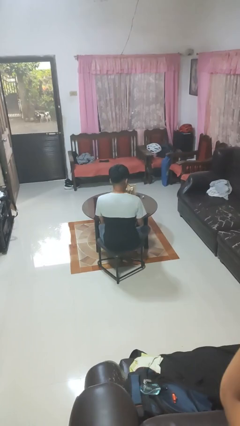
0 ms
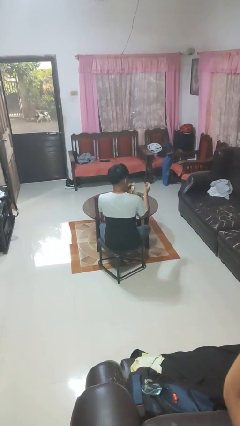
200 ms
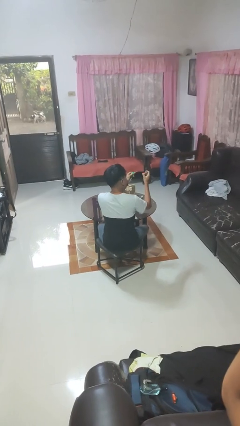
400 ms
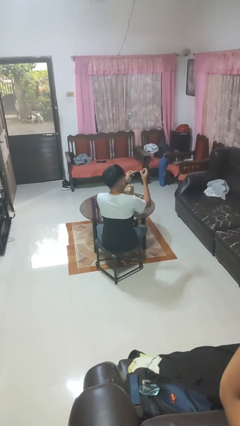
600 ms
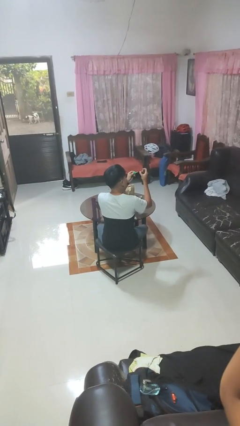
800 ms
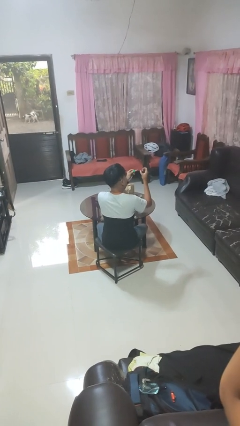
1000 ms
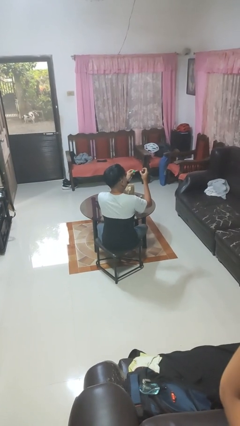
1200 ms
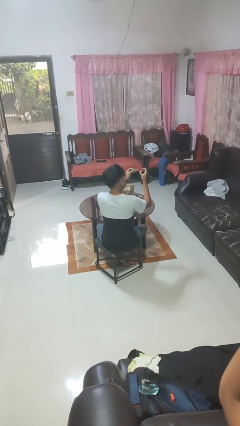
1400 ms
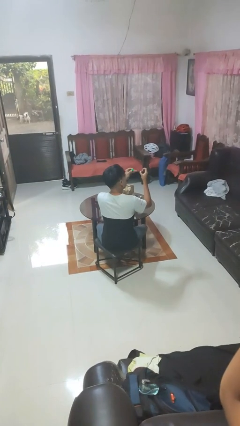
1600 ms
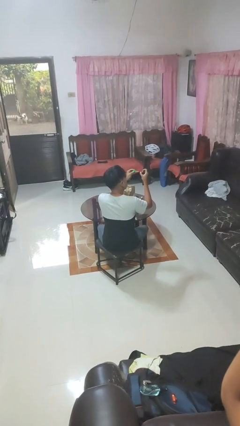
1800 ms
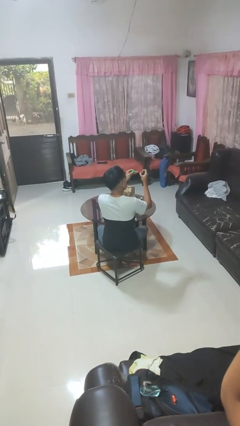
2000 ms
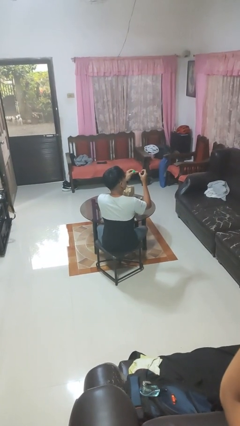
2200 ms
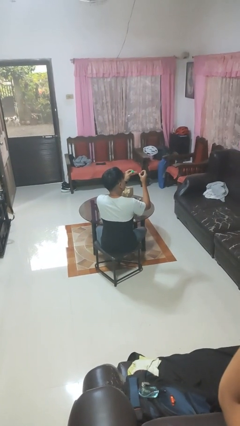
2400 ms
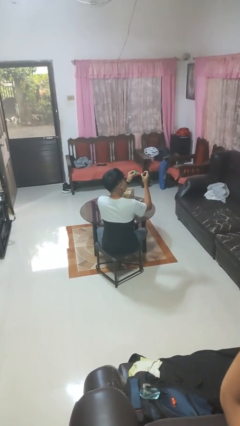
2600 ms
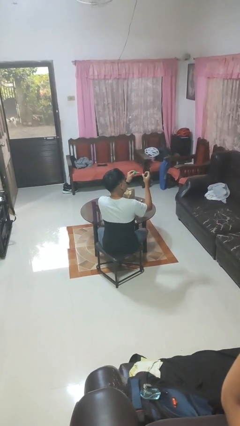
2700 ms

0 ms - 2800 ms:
person paints fingernails

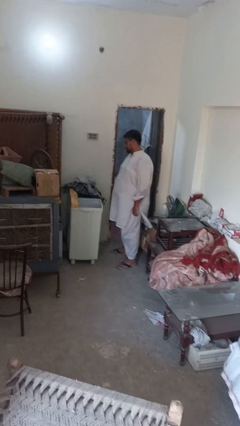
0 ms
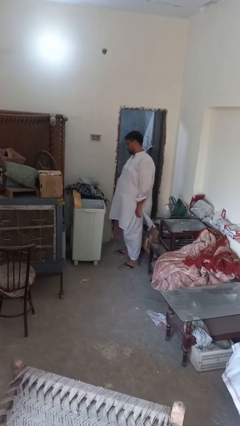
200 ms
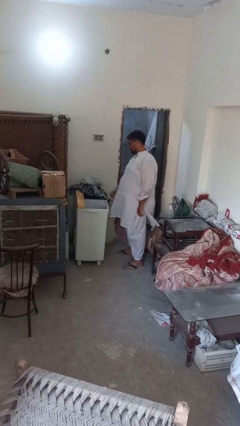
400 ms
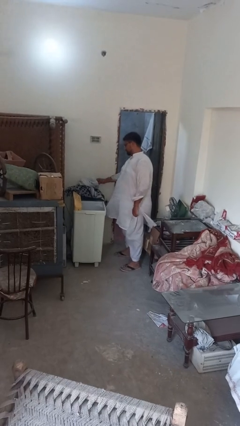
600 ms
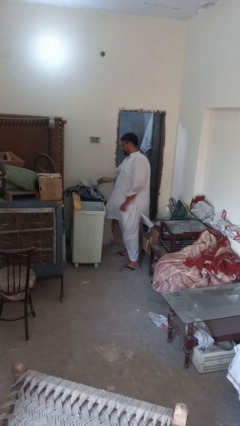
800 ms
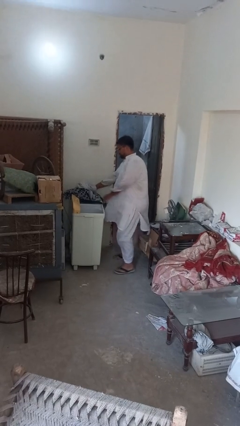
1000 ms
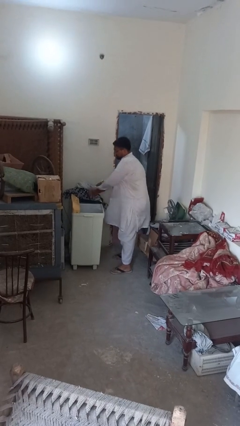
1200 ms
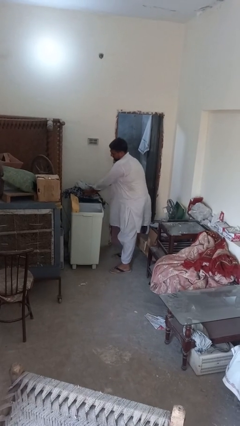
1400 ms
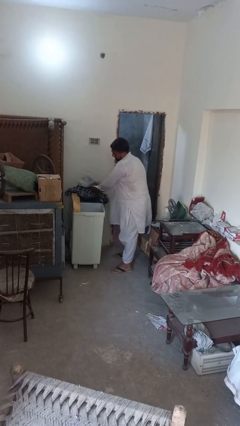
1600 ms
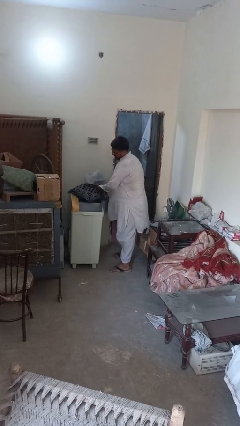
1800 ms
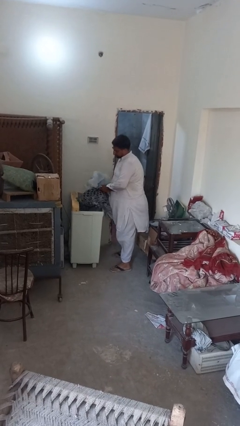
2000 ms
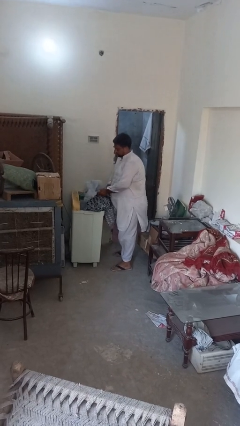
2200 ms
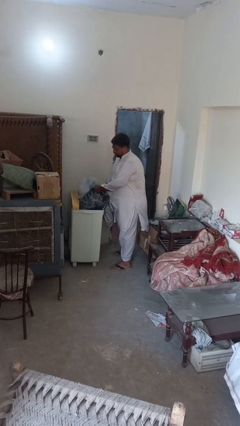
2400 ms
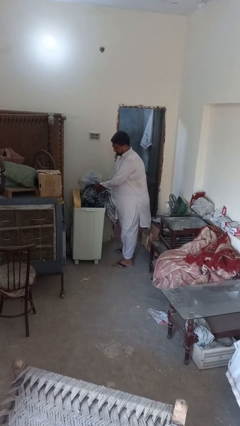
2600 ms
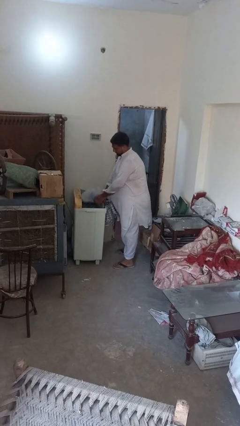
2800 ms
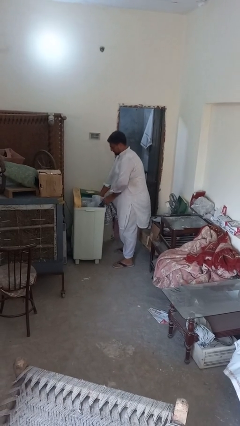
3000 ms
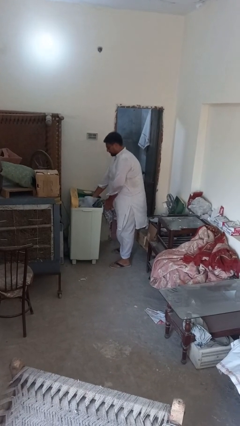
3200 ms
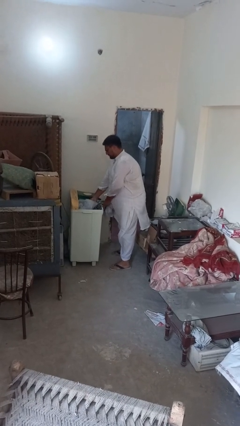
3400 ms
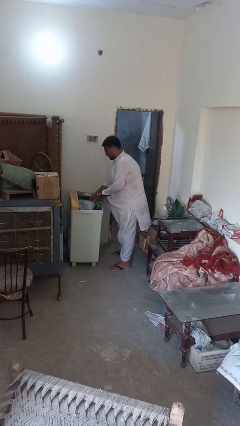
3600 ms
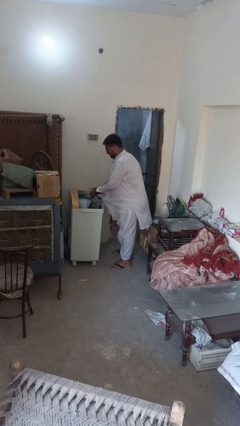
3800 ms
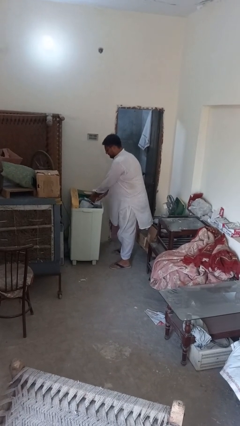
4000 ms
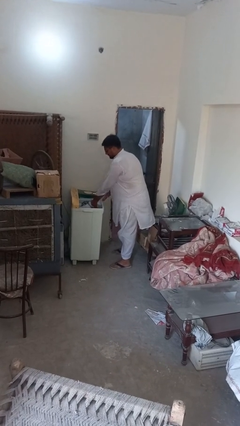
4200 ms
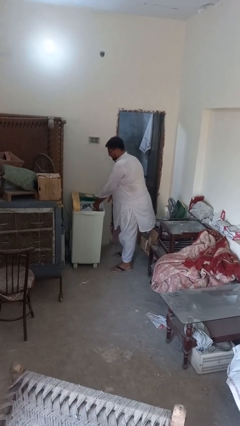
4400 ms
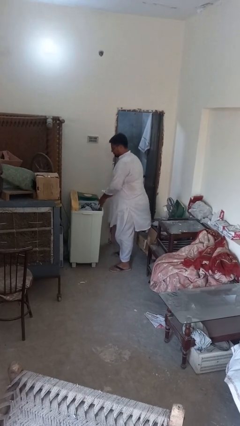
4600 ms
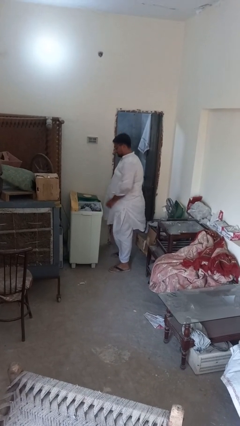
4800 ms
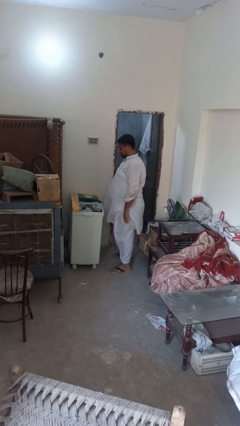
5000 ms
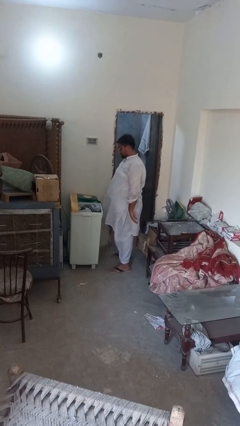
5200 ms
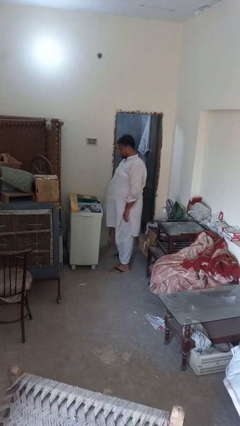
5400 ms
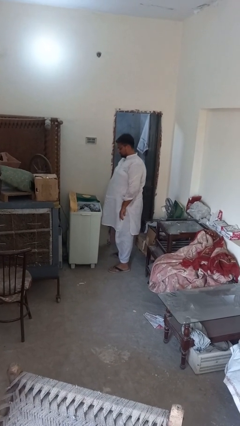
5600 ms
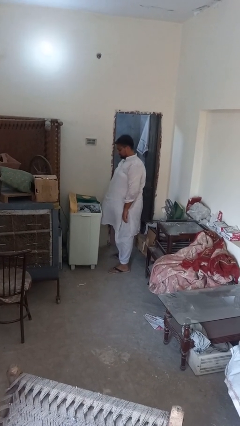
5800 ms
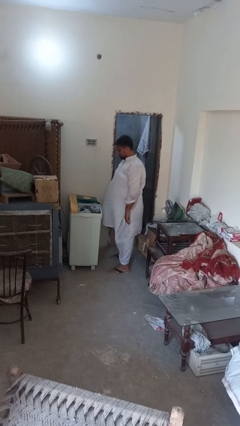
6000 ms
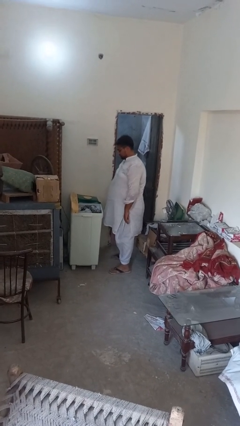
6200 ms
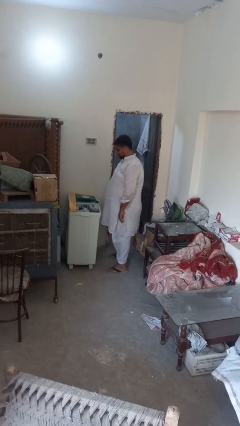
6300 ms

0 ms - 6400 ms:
person loads clotheswasher

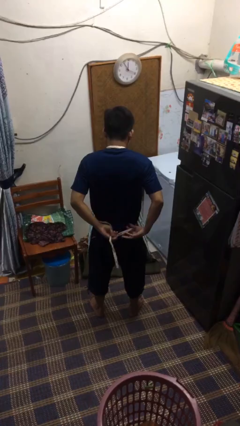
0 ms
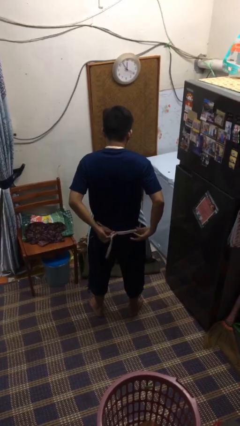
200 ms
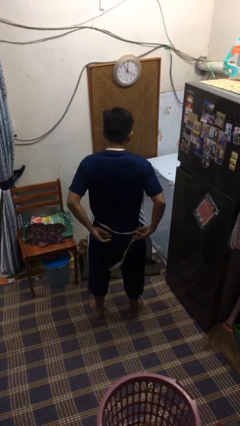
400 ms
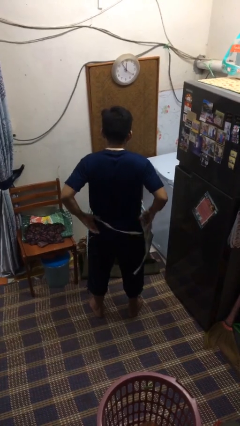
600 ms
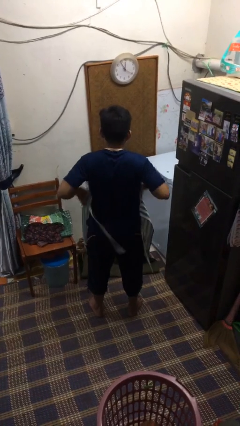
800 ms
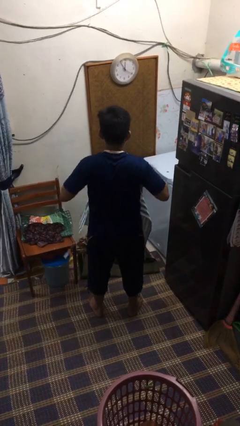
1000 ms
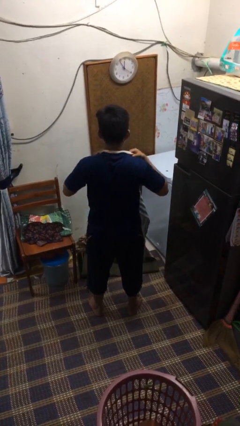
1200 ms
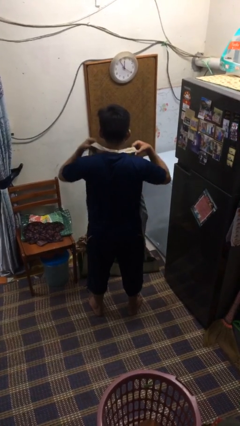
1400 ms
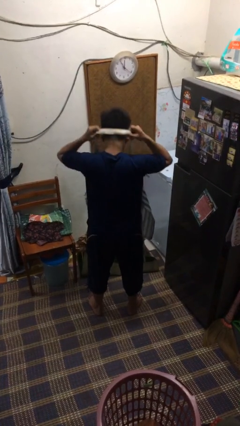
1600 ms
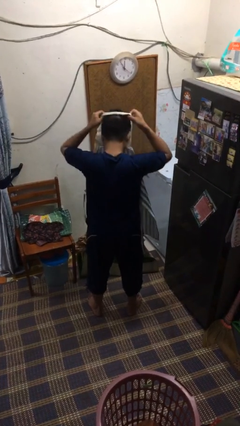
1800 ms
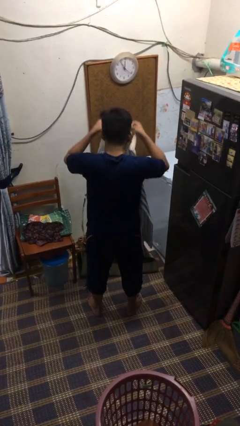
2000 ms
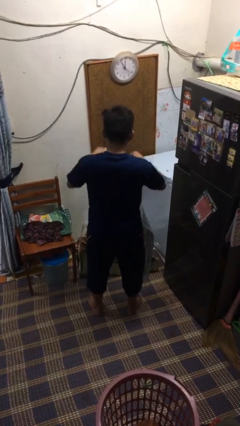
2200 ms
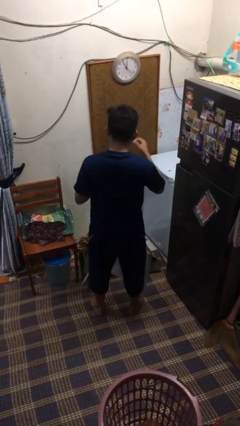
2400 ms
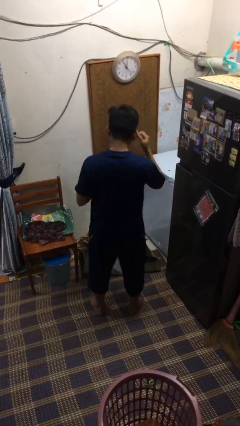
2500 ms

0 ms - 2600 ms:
person takes off apron

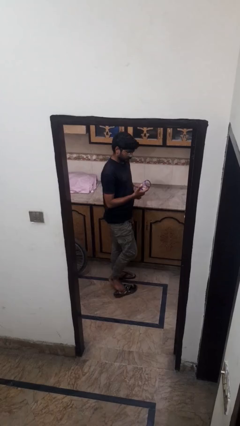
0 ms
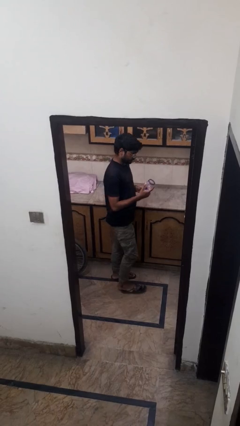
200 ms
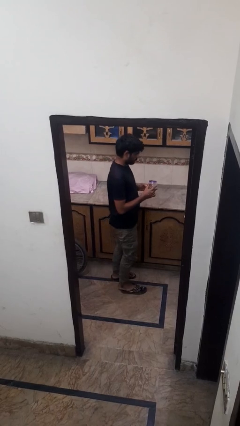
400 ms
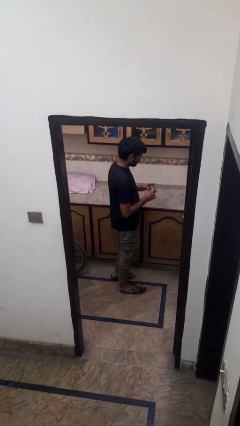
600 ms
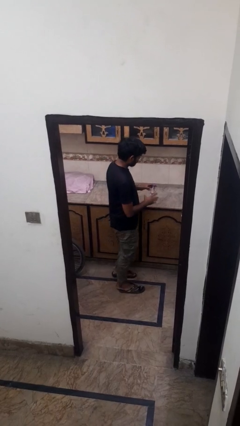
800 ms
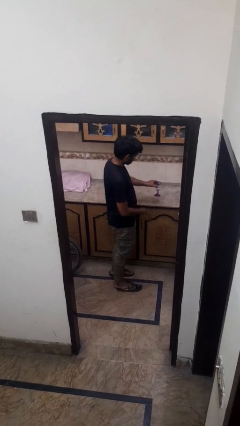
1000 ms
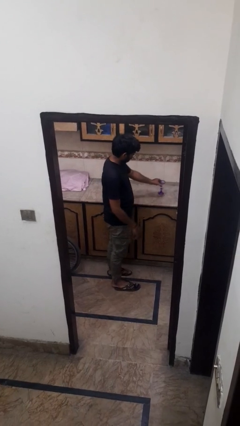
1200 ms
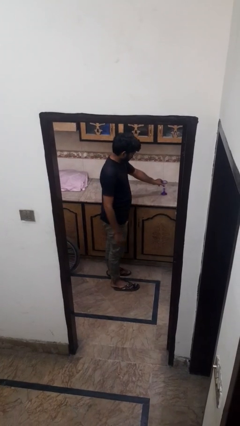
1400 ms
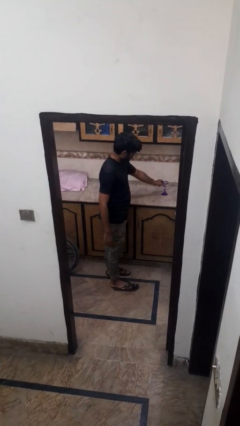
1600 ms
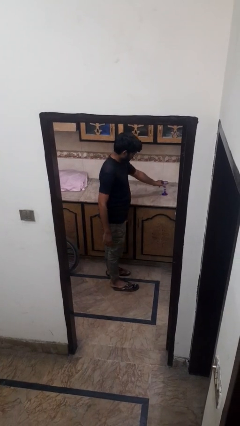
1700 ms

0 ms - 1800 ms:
person puts down object on countertop

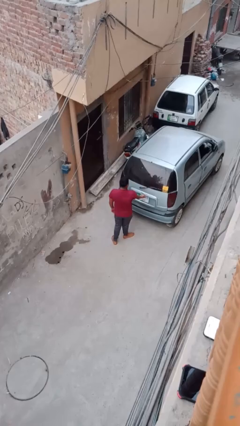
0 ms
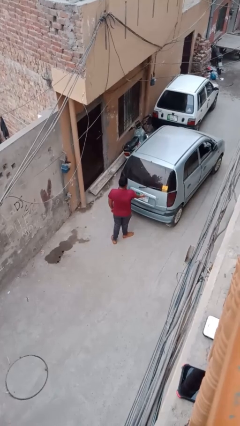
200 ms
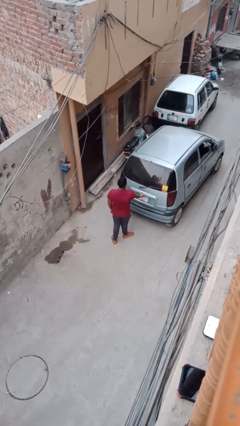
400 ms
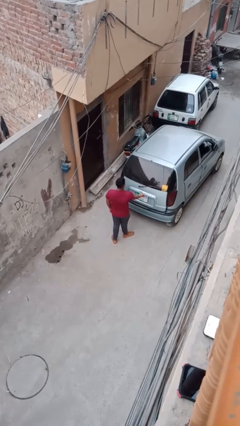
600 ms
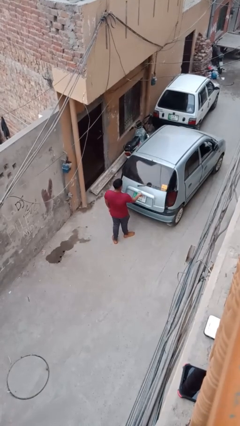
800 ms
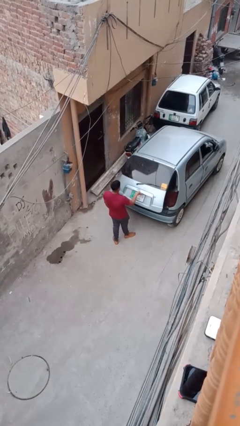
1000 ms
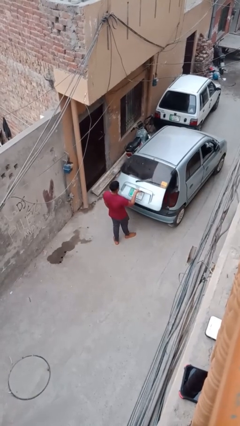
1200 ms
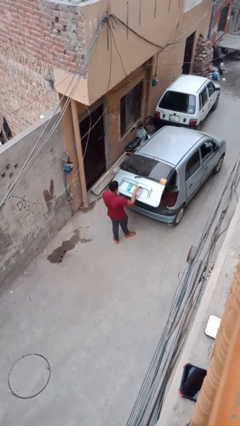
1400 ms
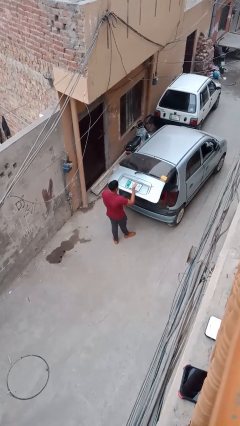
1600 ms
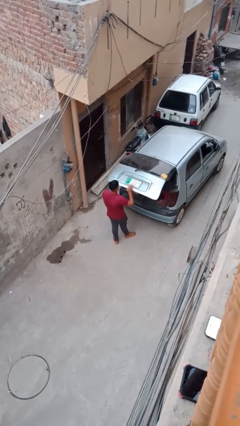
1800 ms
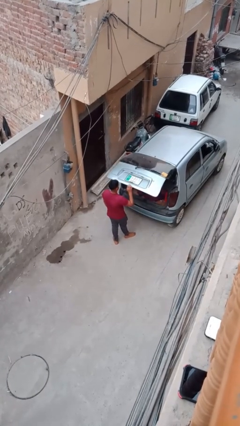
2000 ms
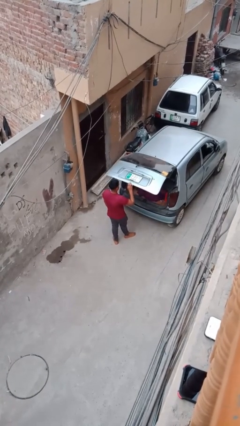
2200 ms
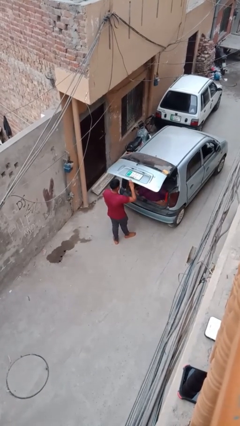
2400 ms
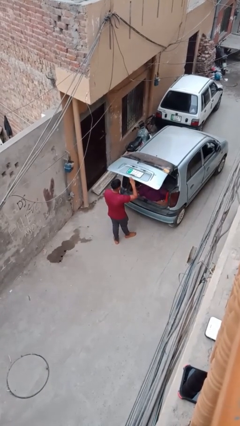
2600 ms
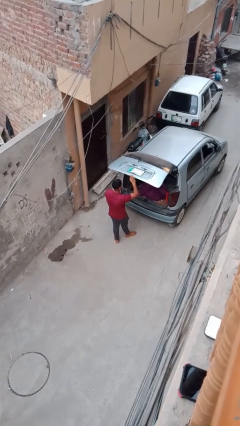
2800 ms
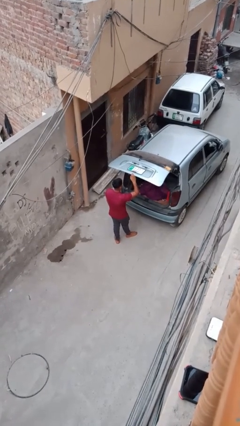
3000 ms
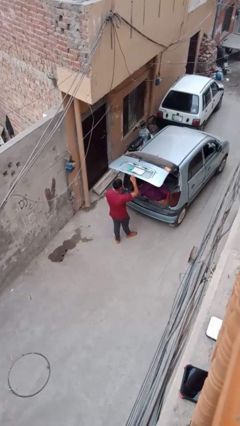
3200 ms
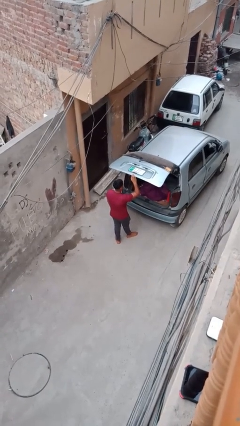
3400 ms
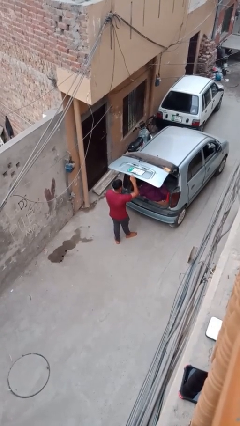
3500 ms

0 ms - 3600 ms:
person opens car trunk

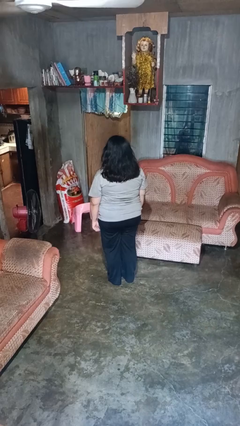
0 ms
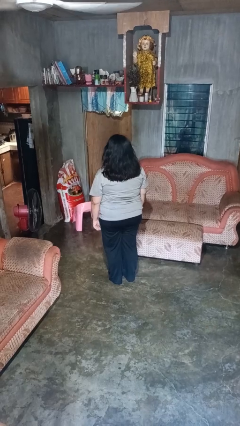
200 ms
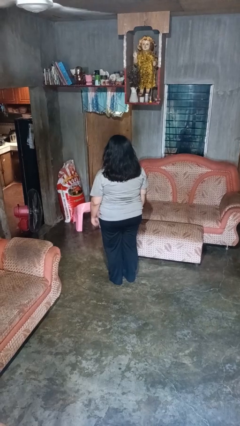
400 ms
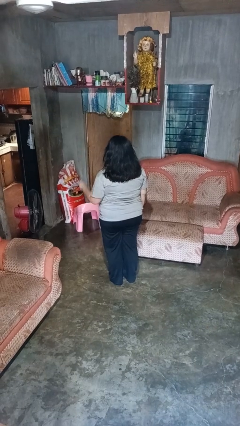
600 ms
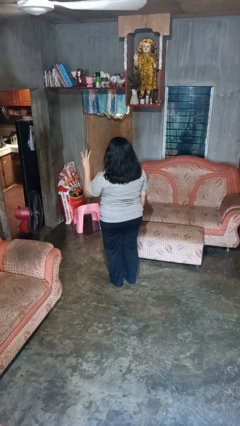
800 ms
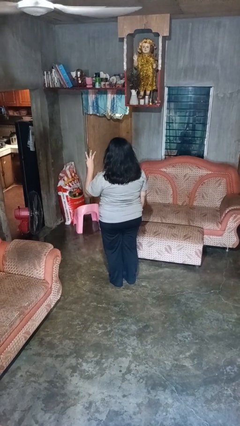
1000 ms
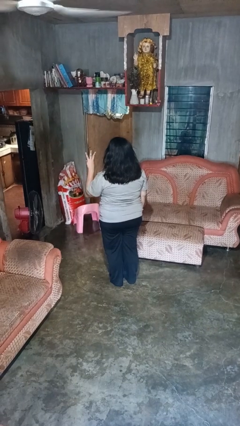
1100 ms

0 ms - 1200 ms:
person gestures number three
